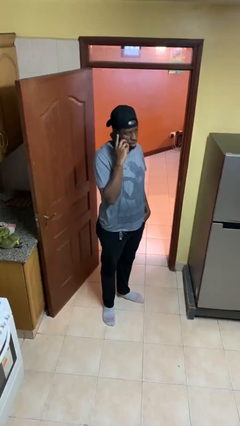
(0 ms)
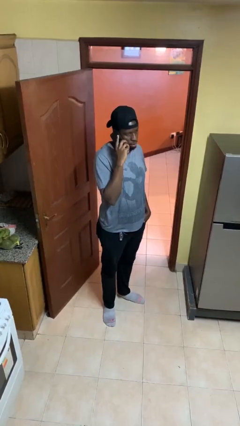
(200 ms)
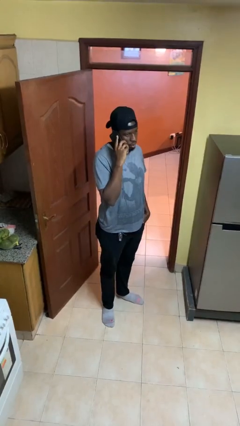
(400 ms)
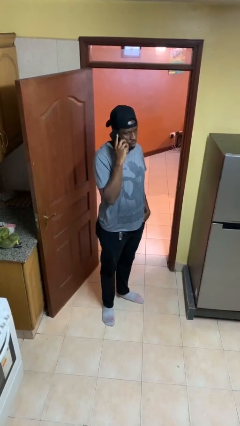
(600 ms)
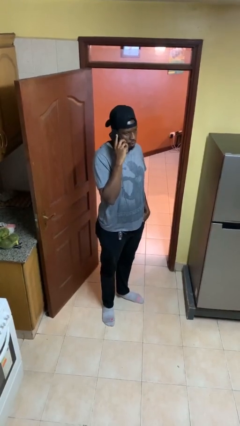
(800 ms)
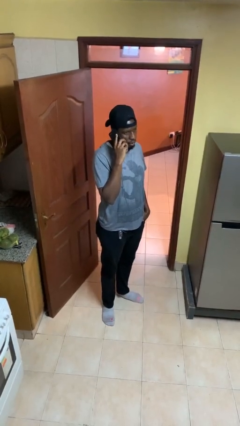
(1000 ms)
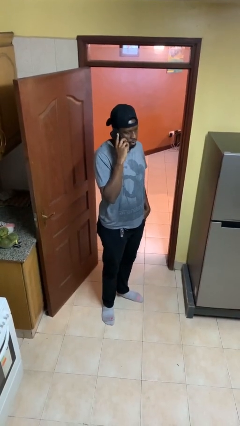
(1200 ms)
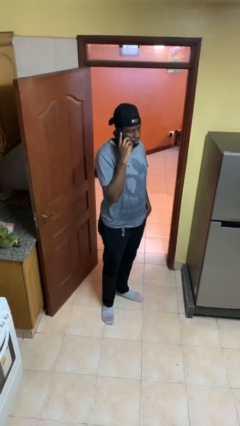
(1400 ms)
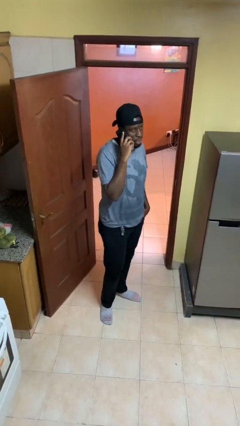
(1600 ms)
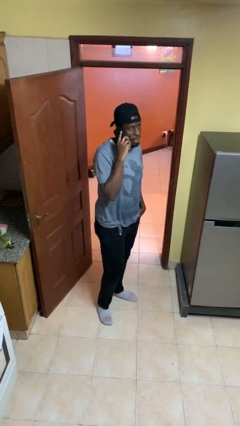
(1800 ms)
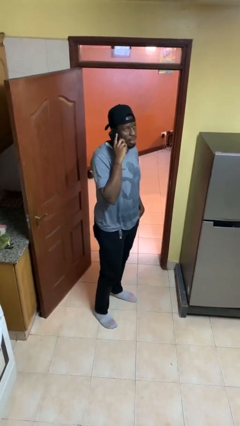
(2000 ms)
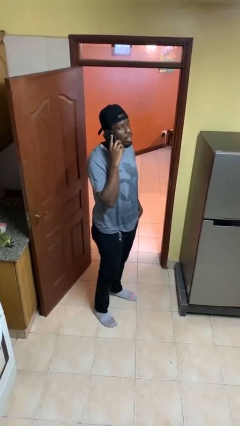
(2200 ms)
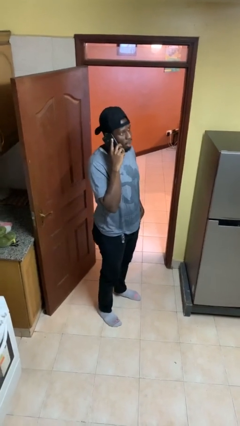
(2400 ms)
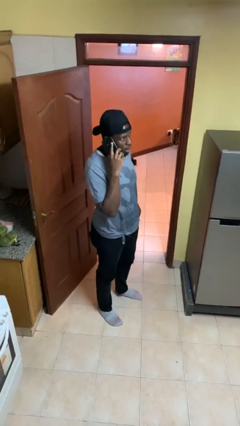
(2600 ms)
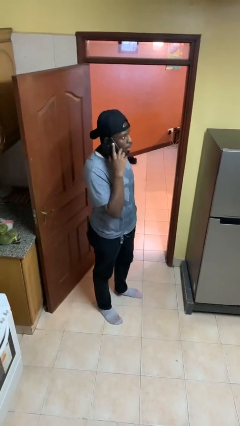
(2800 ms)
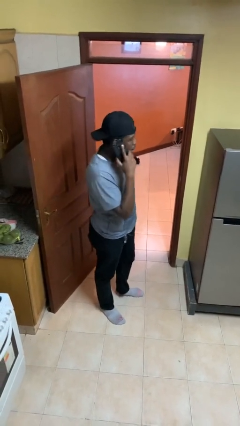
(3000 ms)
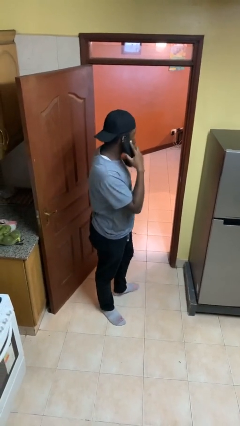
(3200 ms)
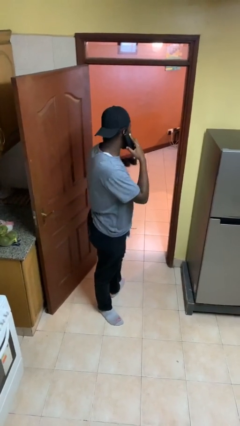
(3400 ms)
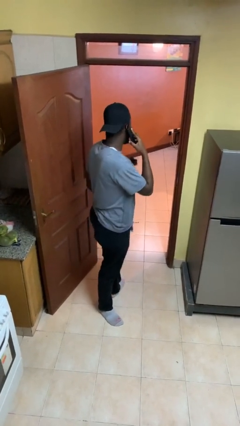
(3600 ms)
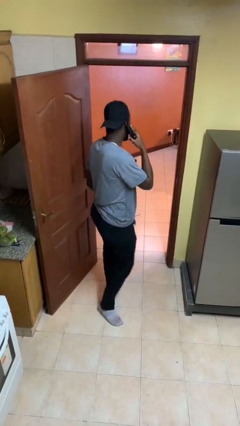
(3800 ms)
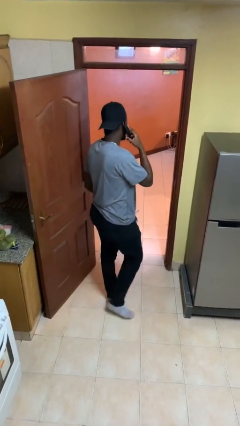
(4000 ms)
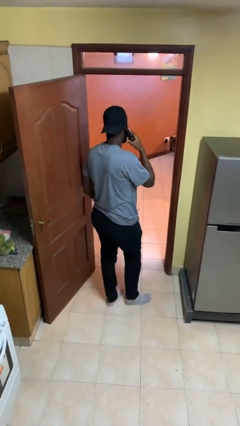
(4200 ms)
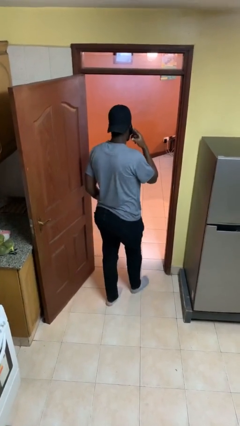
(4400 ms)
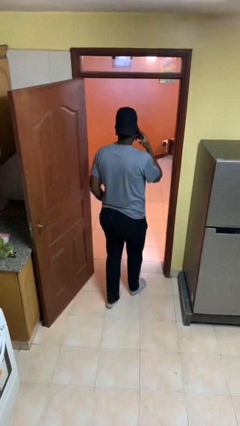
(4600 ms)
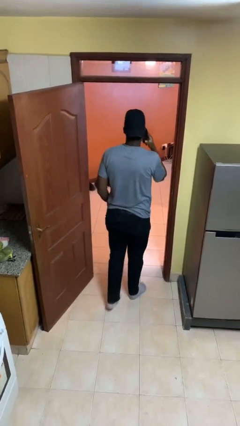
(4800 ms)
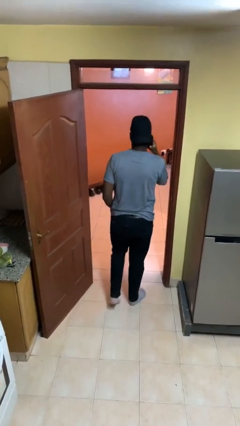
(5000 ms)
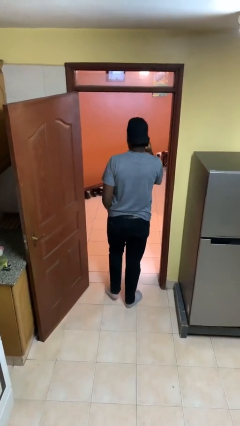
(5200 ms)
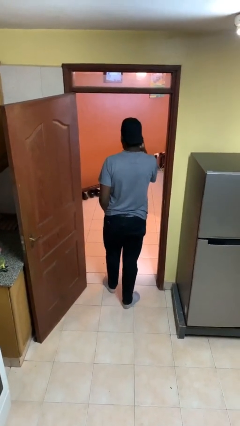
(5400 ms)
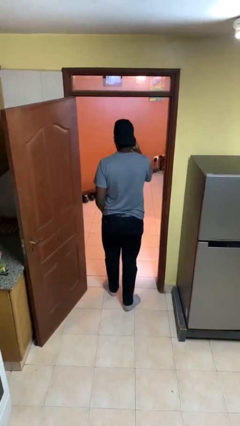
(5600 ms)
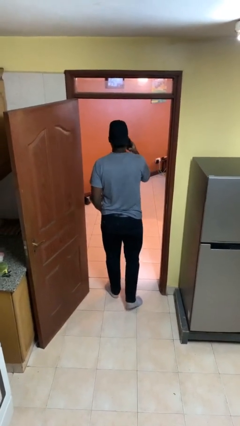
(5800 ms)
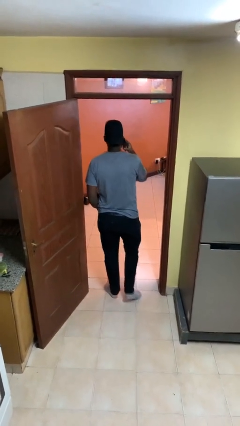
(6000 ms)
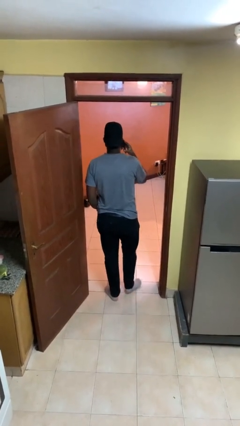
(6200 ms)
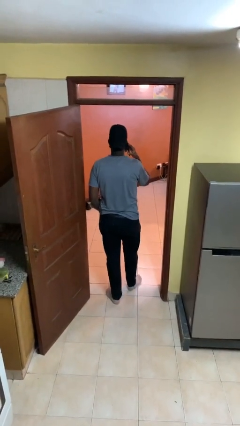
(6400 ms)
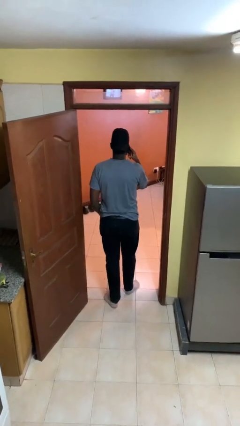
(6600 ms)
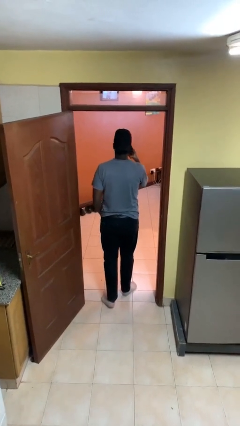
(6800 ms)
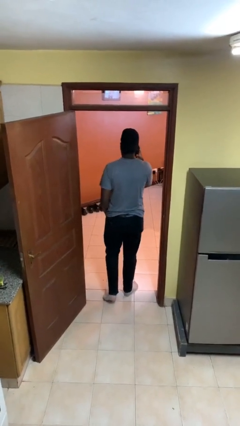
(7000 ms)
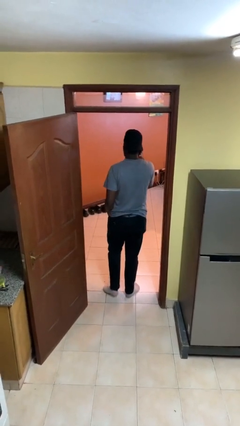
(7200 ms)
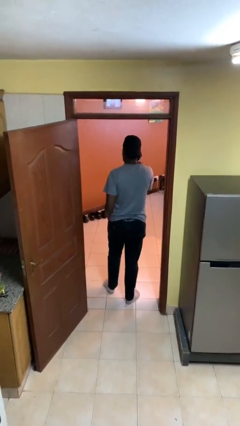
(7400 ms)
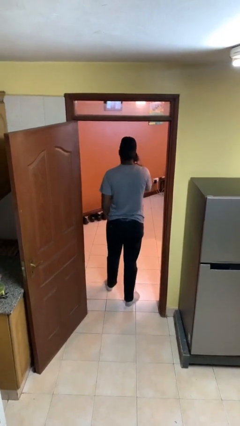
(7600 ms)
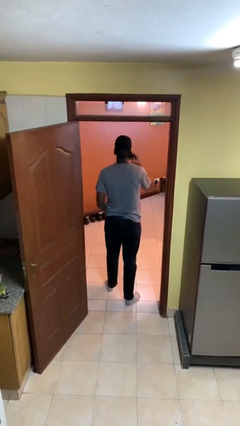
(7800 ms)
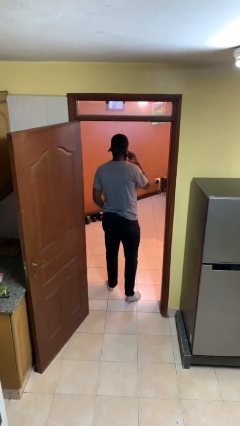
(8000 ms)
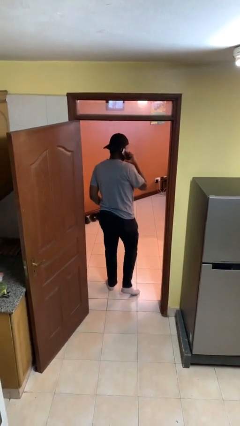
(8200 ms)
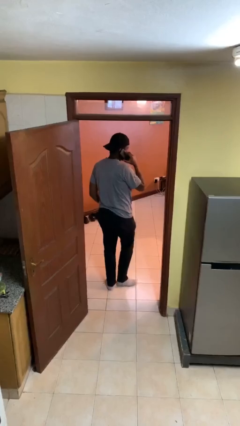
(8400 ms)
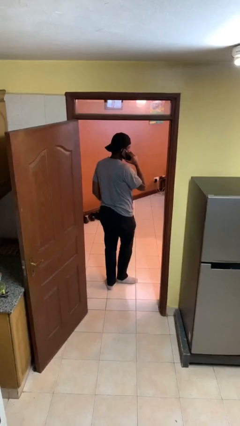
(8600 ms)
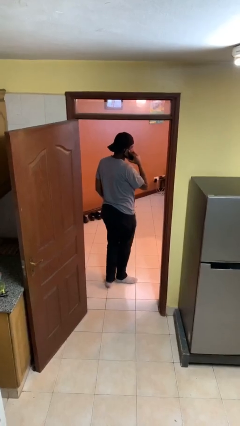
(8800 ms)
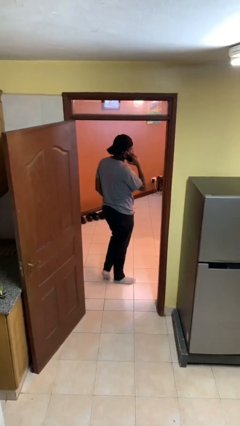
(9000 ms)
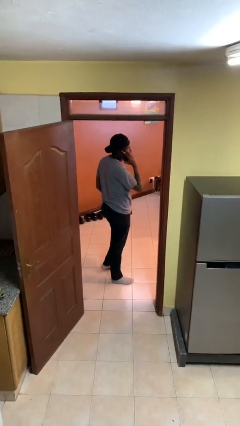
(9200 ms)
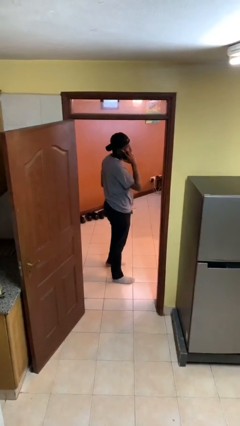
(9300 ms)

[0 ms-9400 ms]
person exits scene through structure

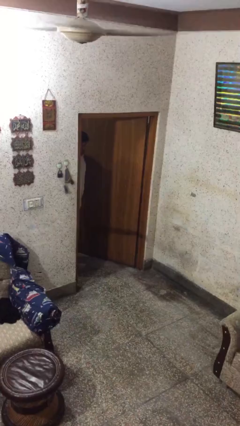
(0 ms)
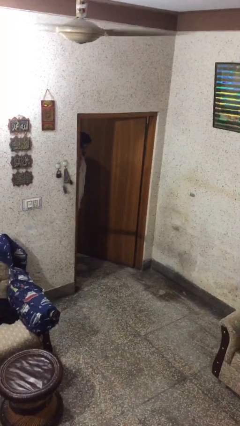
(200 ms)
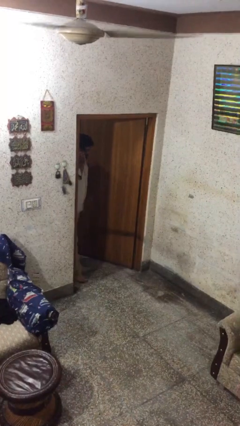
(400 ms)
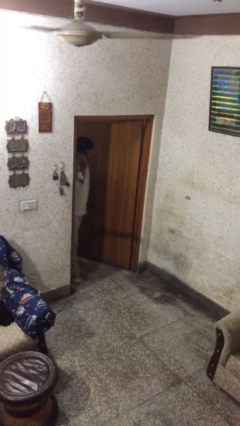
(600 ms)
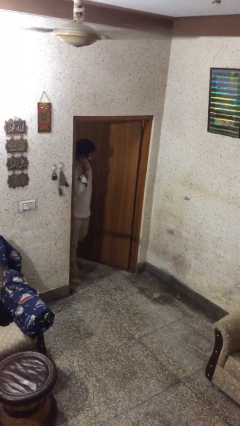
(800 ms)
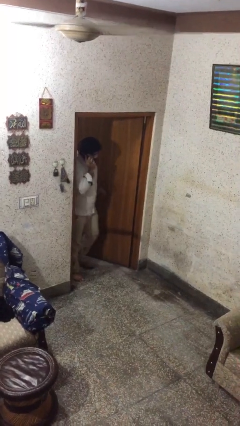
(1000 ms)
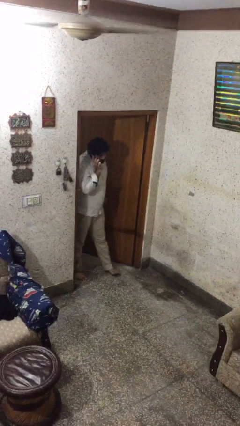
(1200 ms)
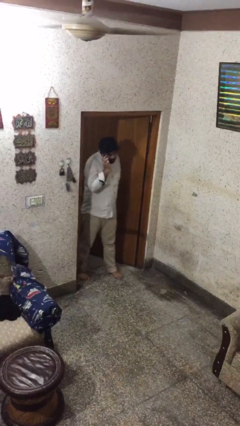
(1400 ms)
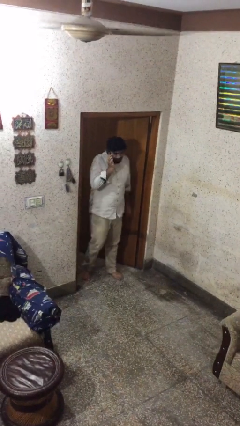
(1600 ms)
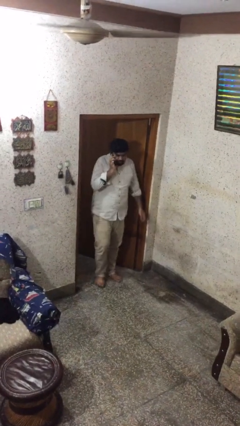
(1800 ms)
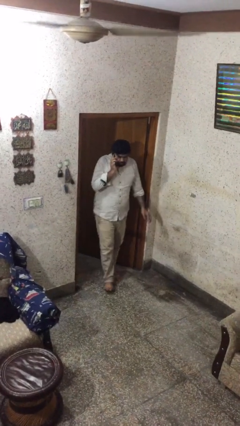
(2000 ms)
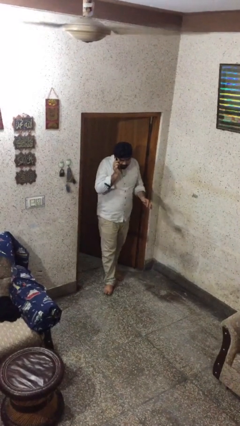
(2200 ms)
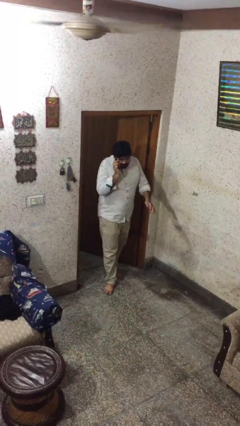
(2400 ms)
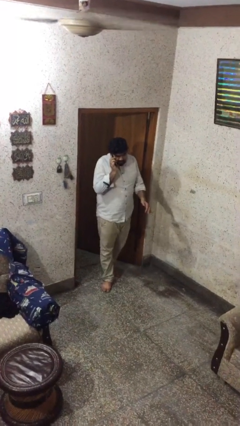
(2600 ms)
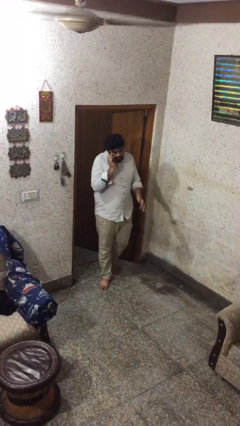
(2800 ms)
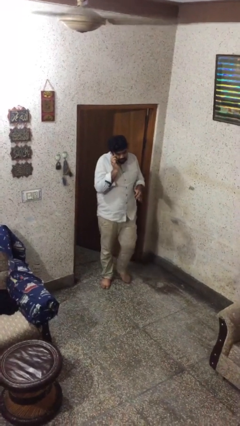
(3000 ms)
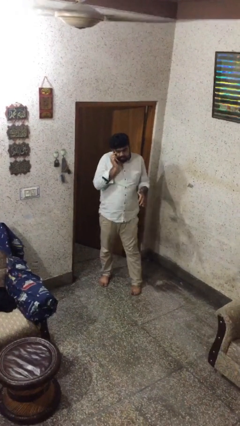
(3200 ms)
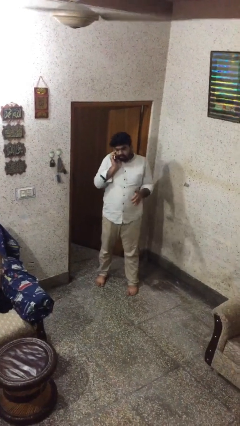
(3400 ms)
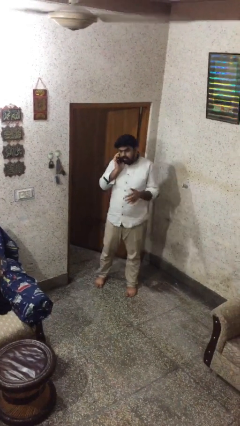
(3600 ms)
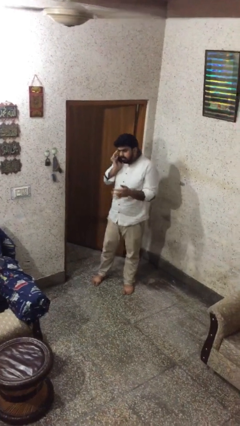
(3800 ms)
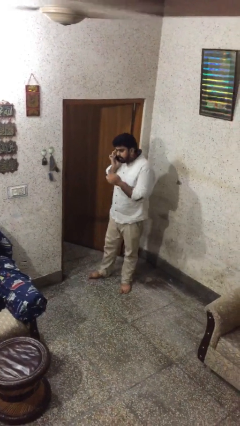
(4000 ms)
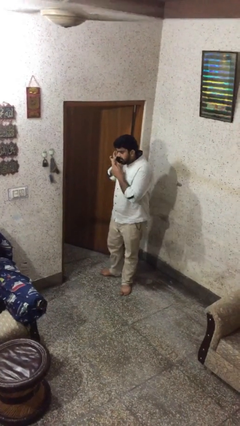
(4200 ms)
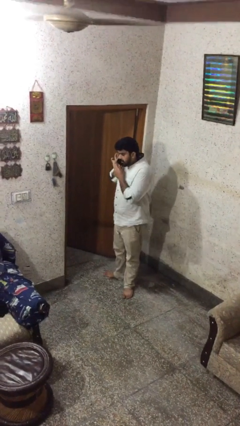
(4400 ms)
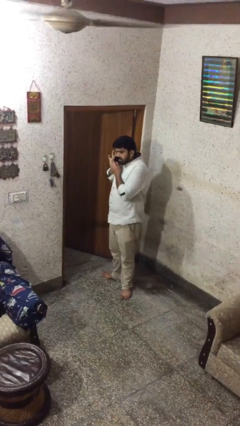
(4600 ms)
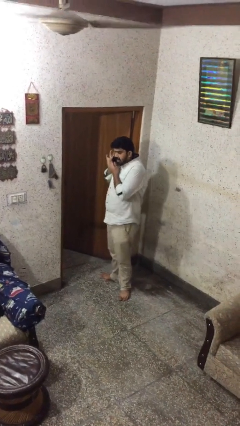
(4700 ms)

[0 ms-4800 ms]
person enters scene through structure

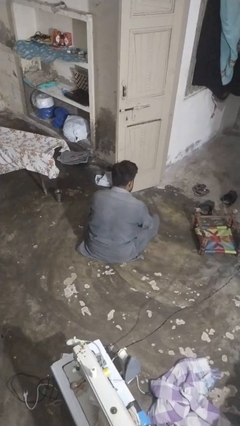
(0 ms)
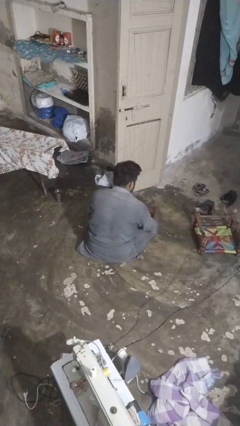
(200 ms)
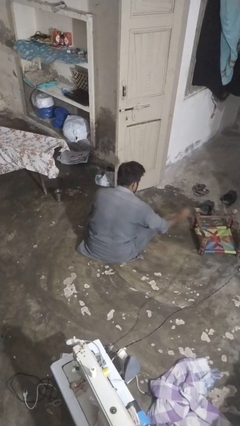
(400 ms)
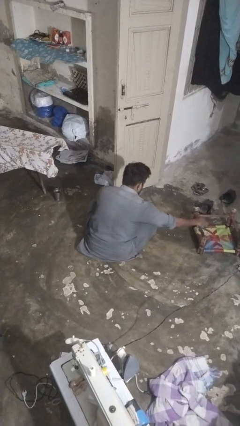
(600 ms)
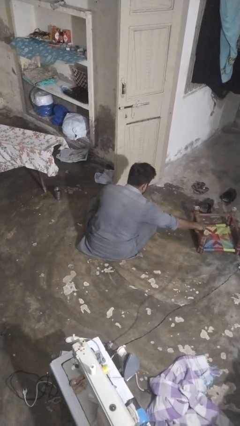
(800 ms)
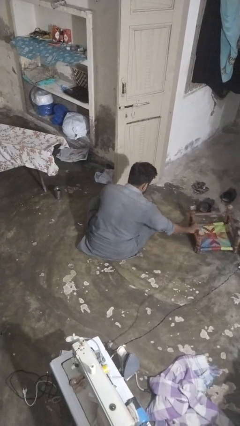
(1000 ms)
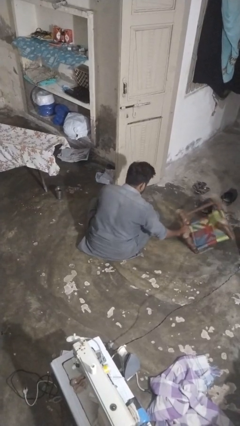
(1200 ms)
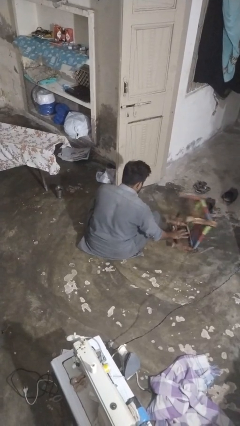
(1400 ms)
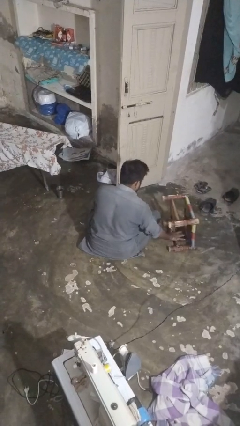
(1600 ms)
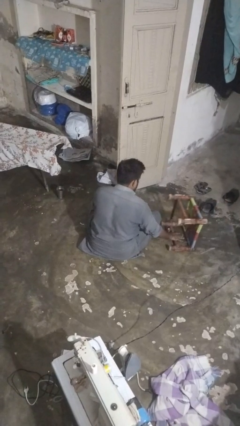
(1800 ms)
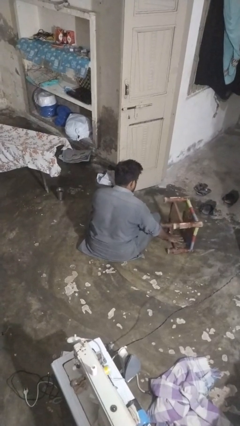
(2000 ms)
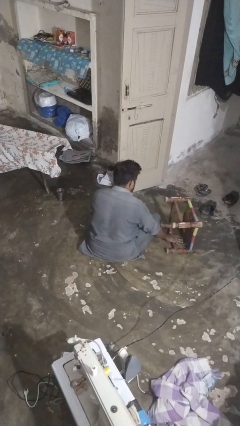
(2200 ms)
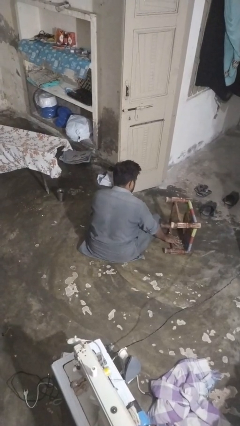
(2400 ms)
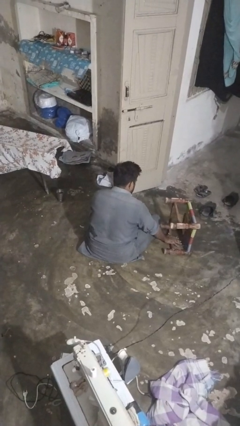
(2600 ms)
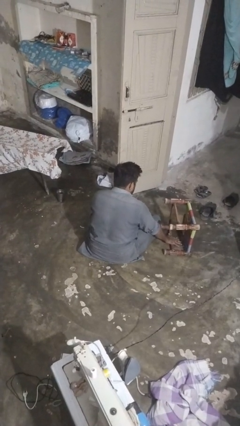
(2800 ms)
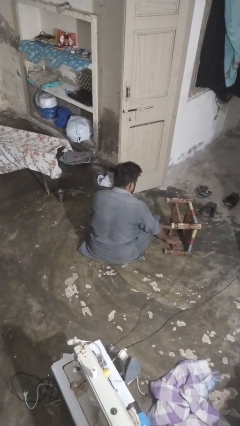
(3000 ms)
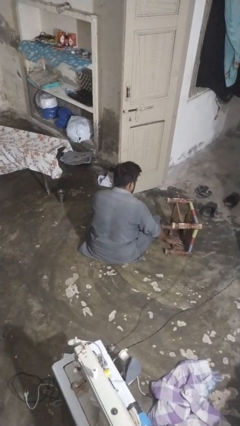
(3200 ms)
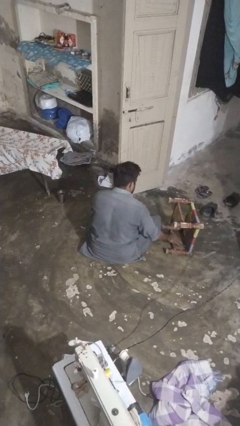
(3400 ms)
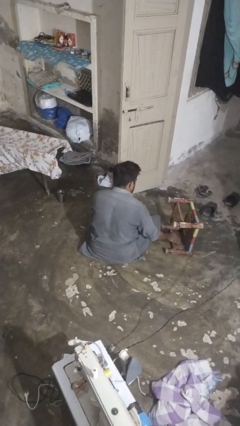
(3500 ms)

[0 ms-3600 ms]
person sets upright furniture

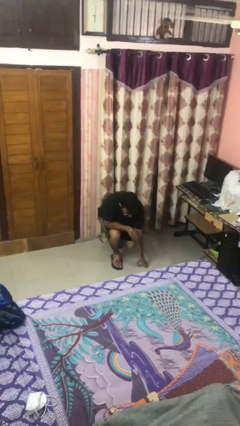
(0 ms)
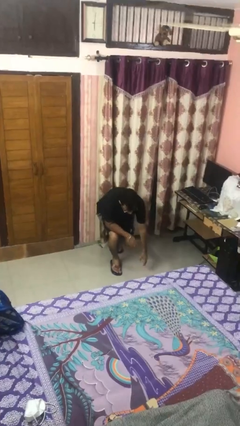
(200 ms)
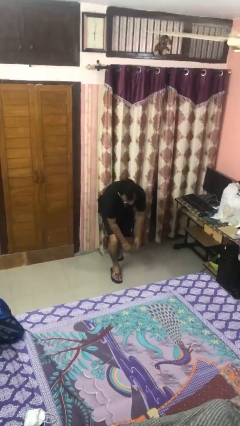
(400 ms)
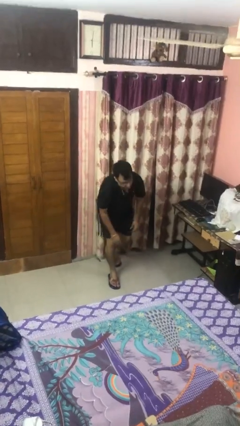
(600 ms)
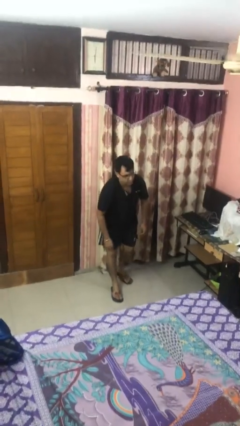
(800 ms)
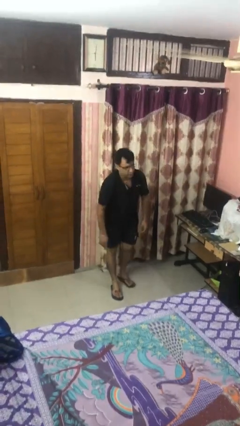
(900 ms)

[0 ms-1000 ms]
person stands up from floor
